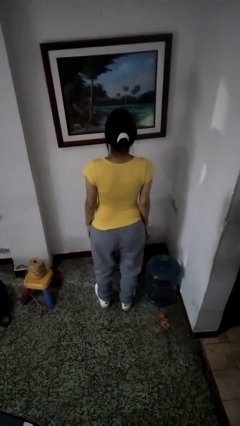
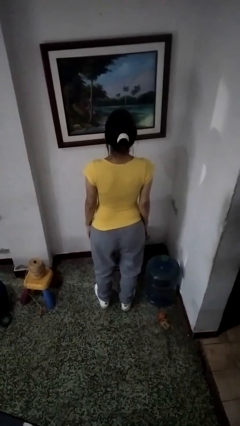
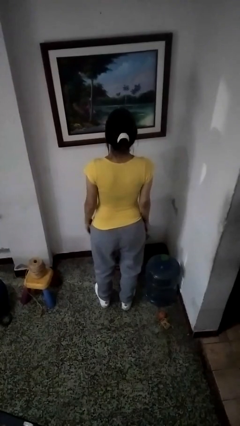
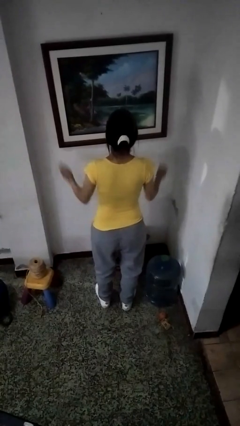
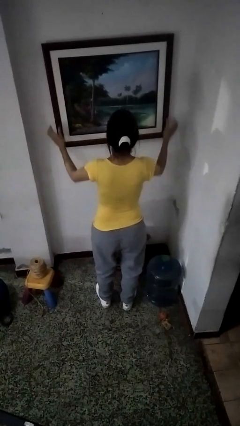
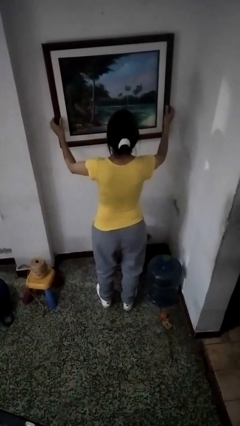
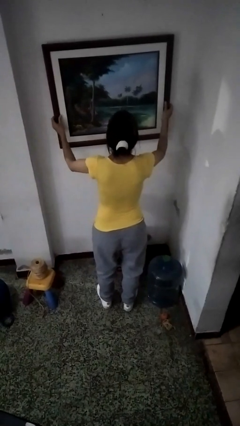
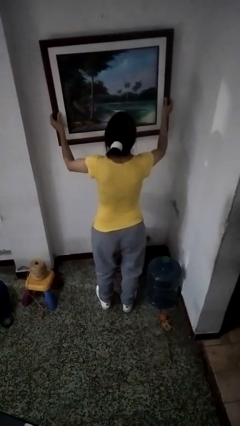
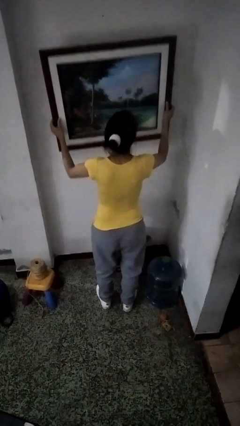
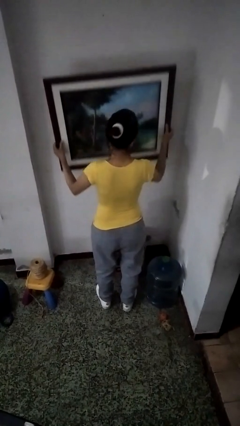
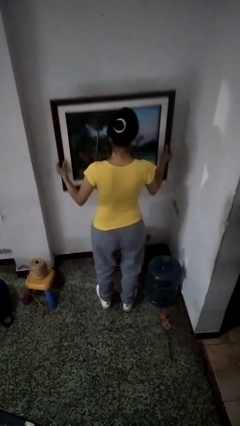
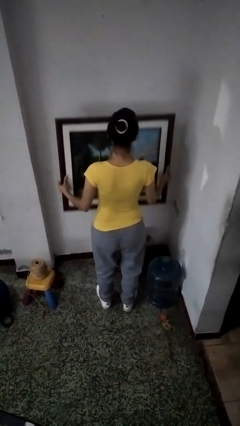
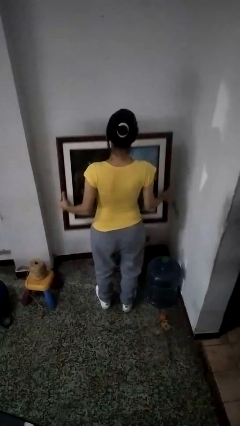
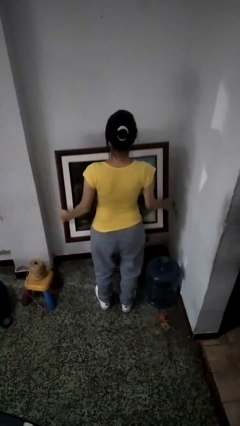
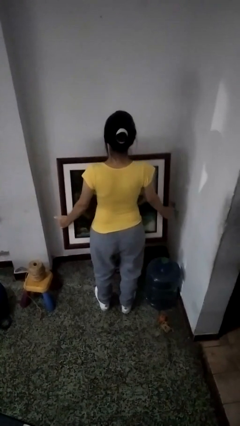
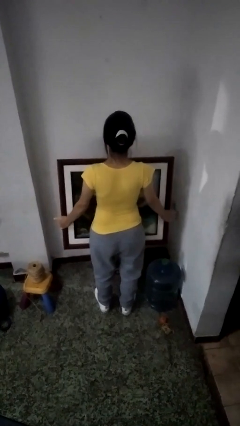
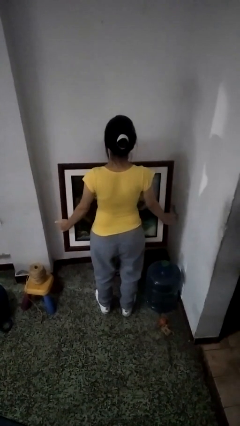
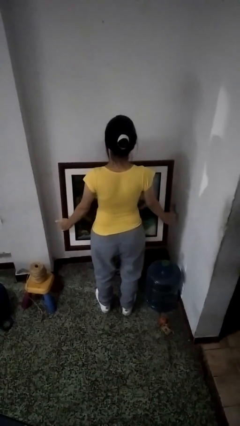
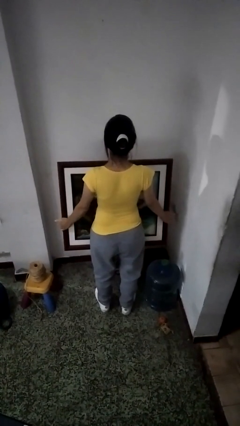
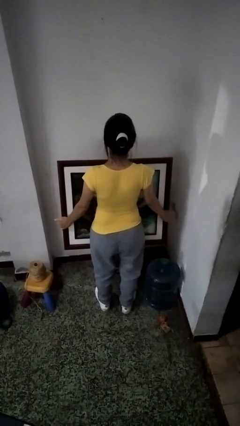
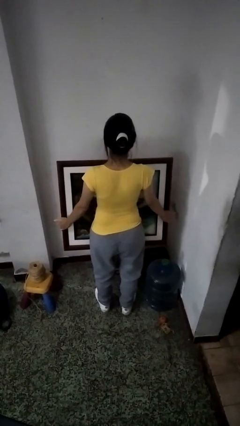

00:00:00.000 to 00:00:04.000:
person takes down picture frame

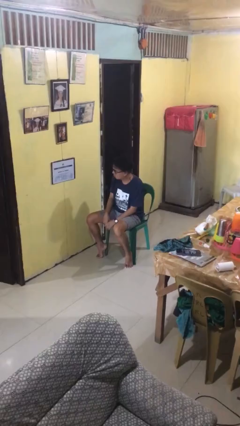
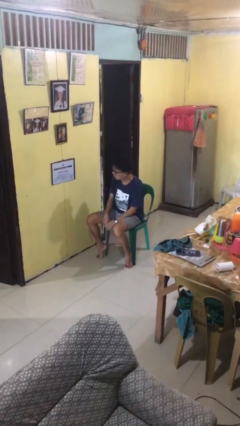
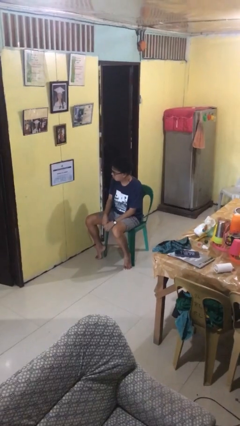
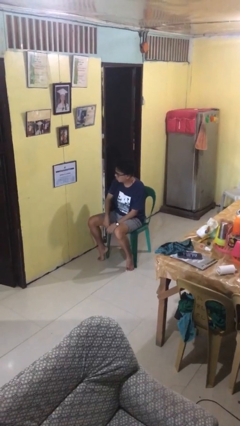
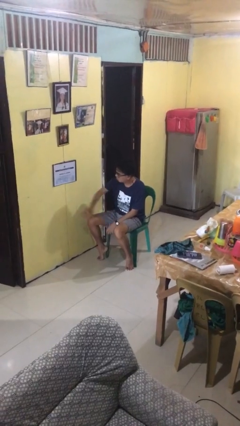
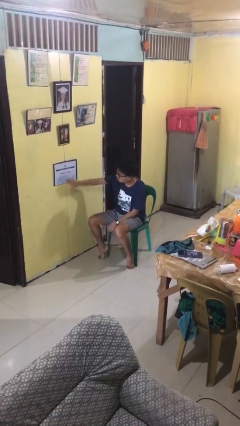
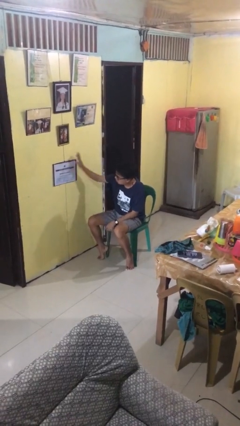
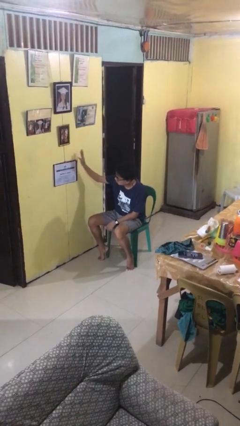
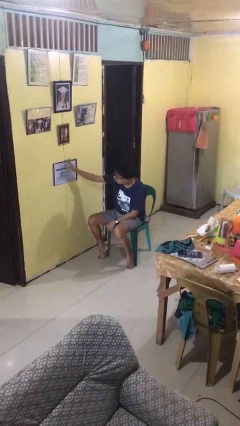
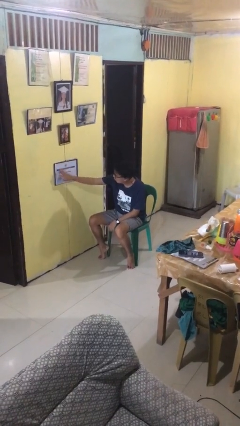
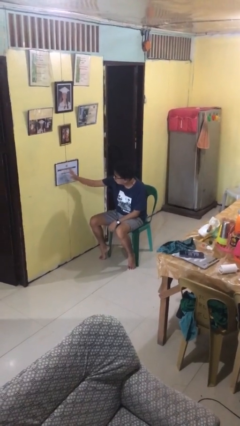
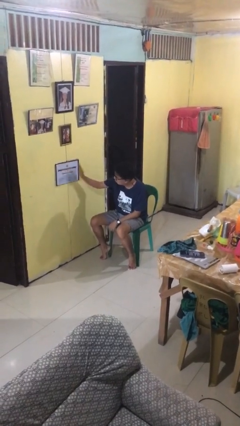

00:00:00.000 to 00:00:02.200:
person waves hand over object

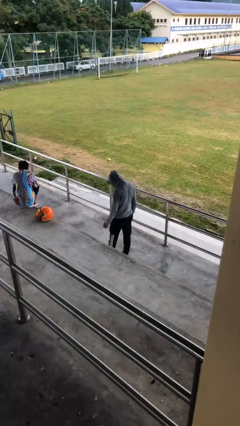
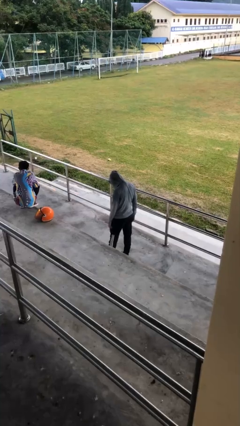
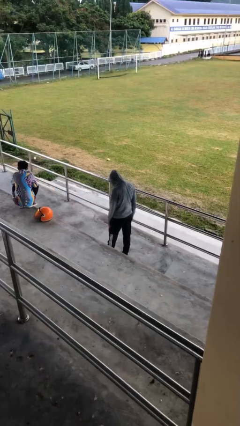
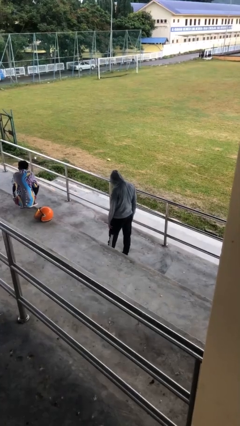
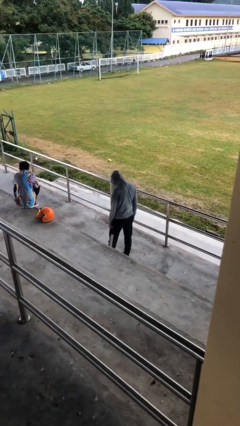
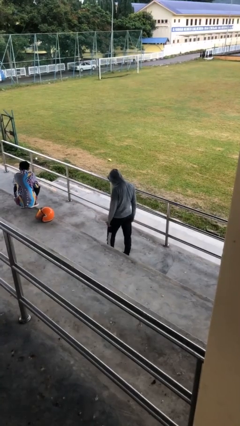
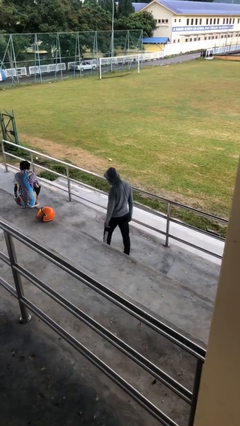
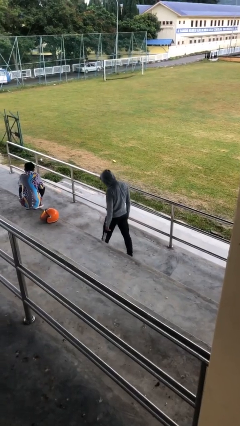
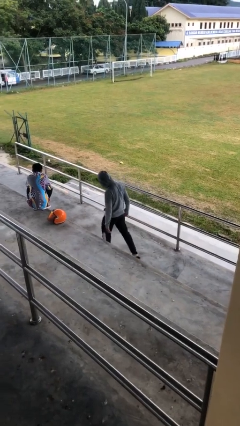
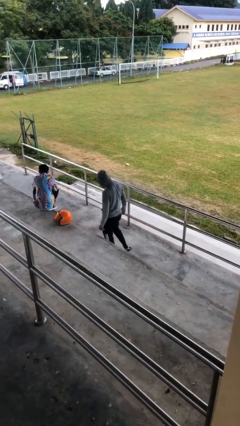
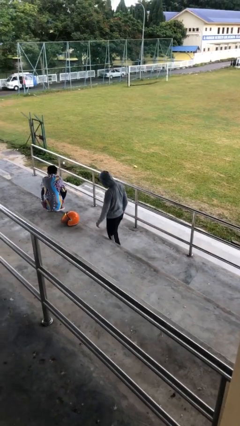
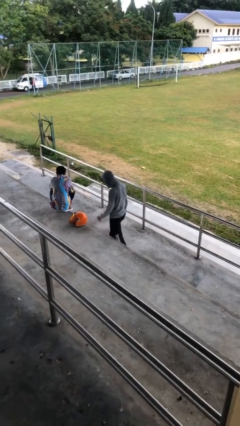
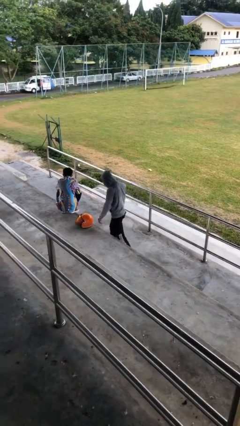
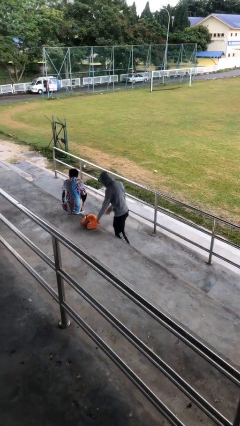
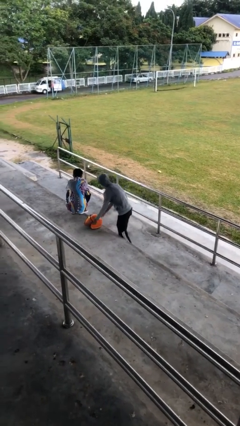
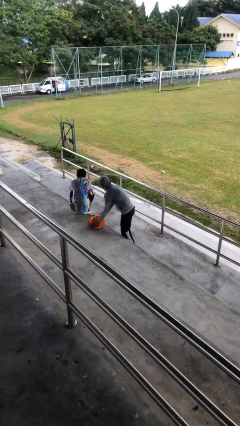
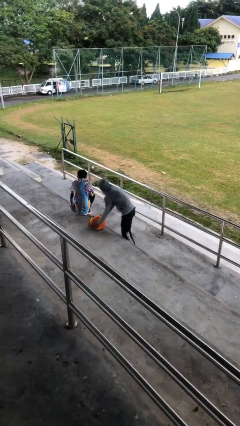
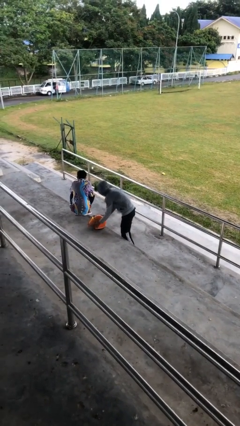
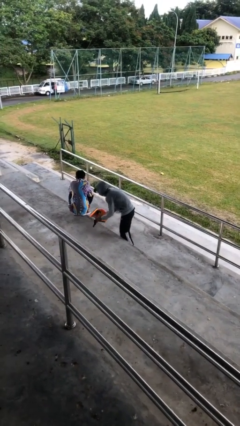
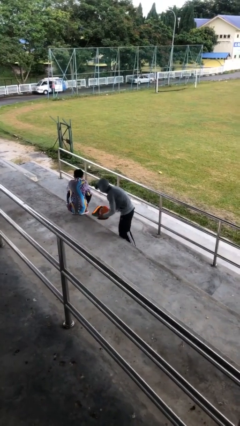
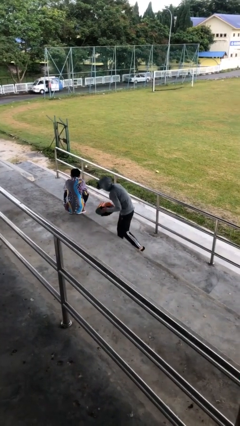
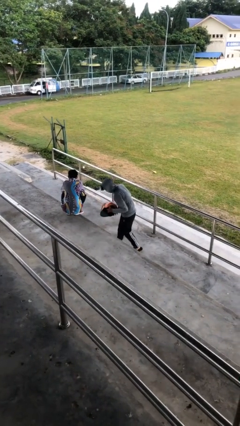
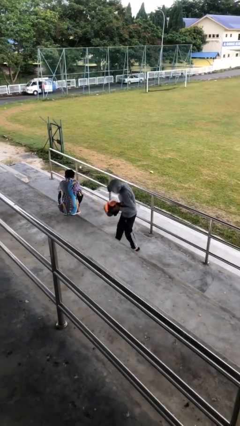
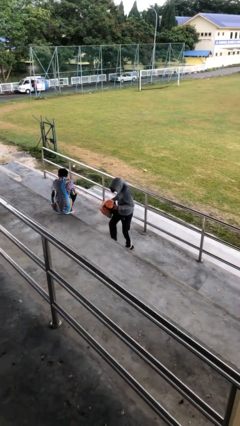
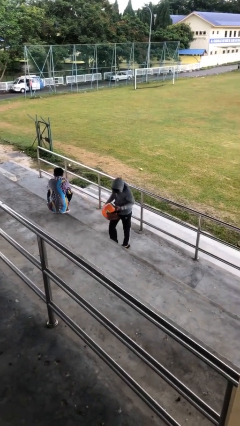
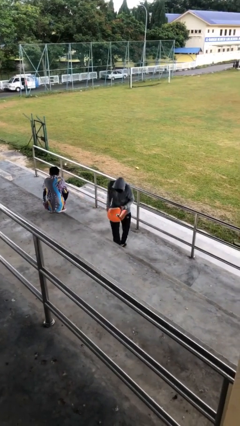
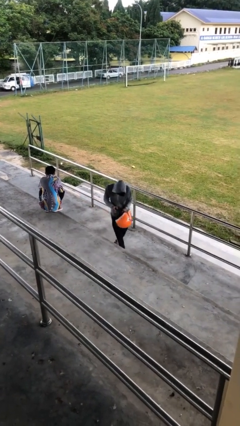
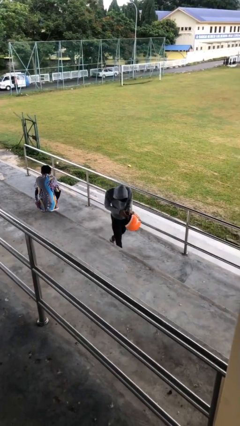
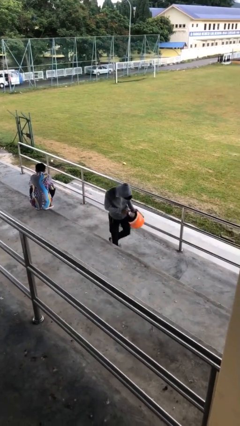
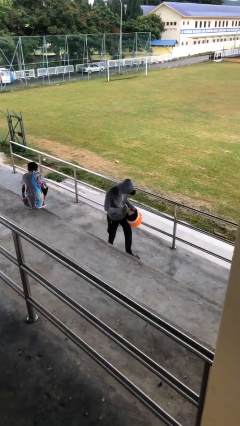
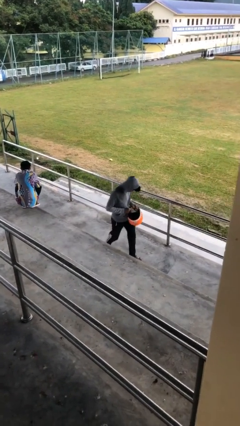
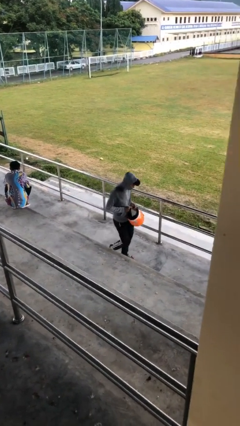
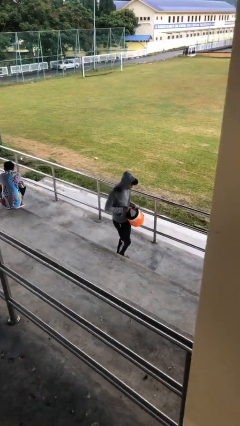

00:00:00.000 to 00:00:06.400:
person steals object from person

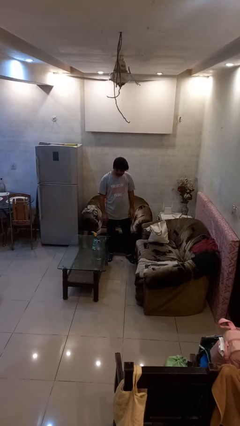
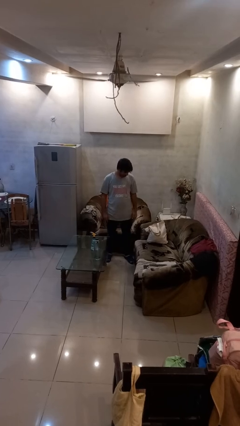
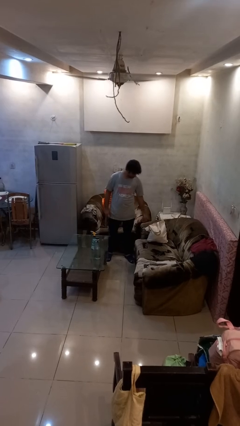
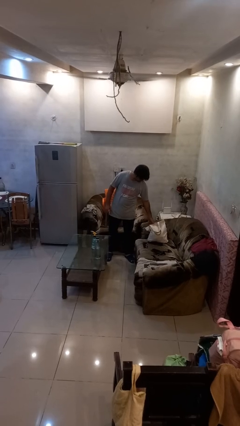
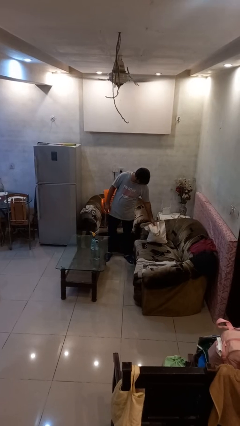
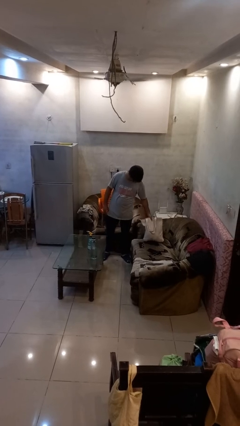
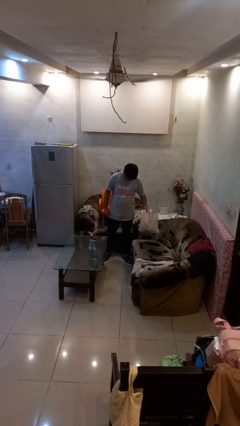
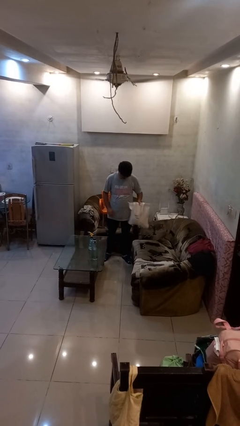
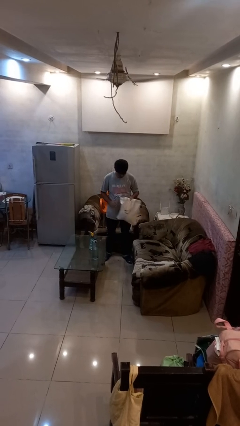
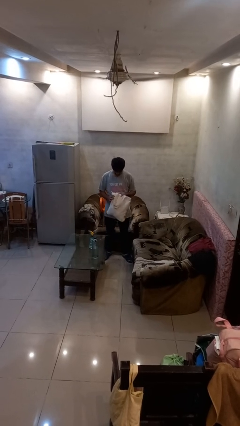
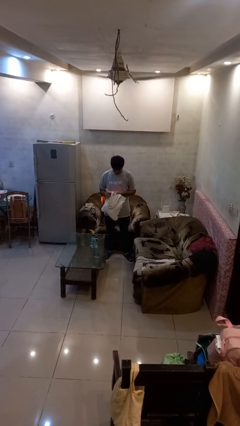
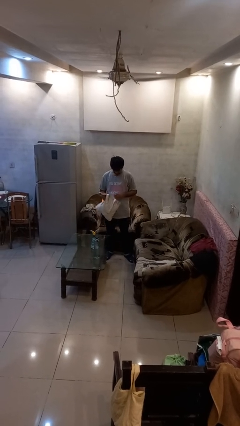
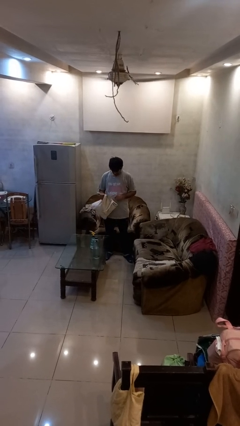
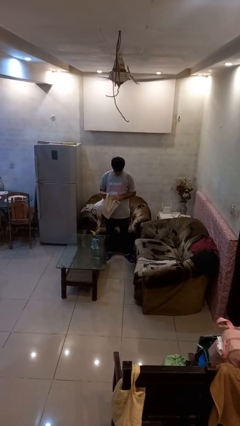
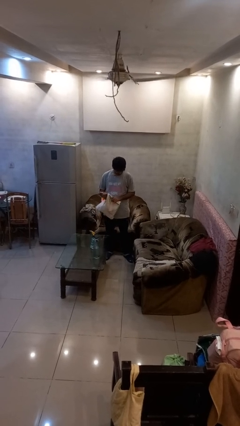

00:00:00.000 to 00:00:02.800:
person picks up object from couch

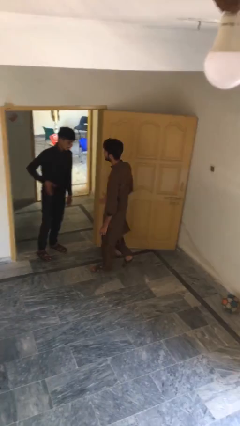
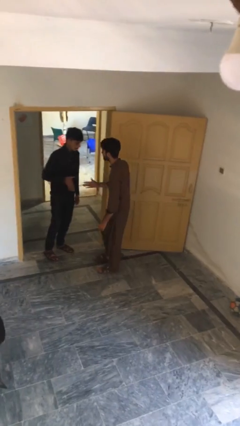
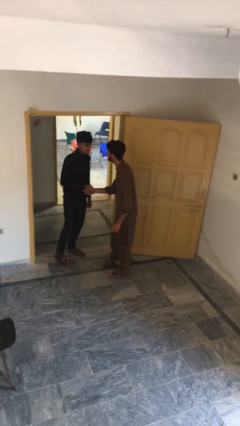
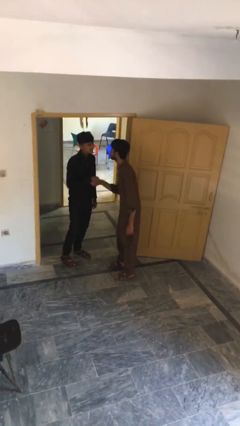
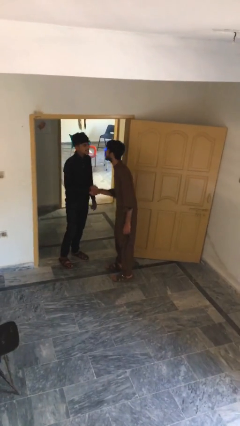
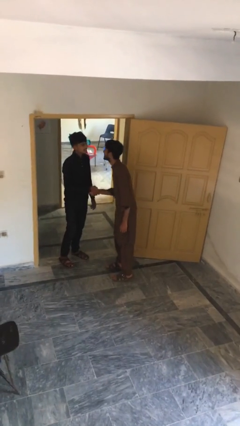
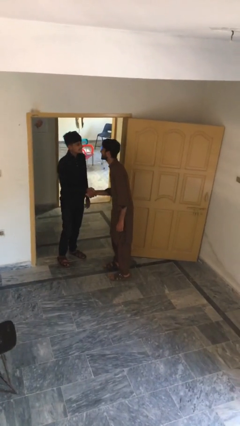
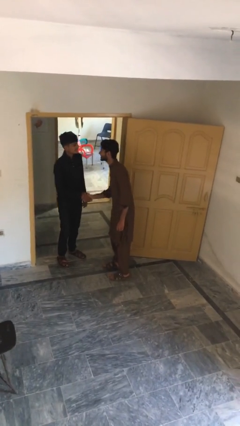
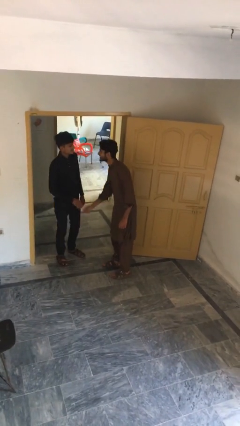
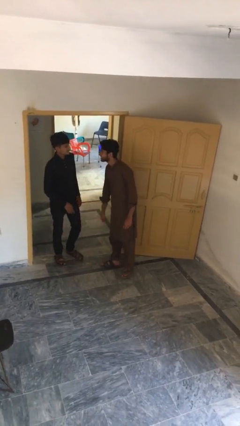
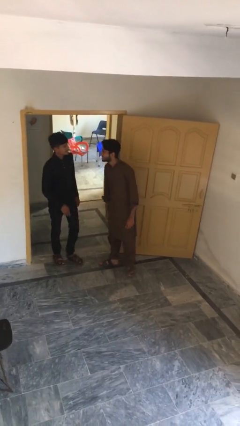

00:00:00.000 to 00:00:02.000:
person shakes hand

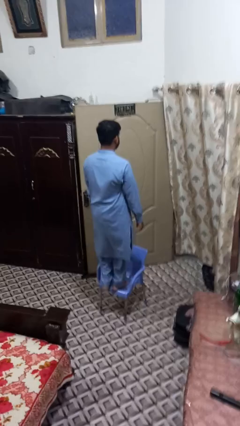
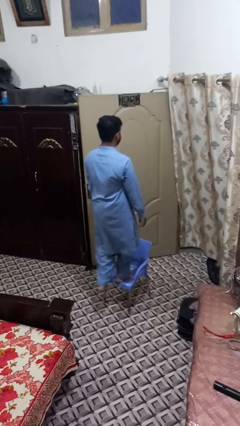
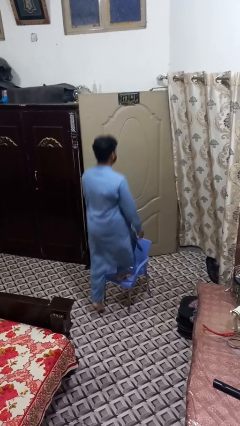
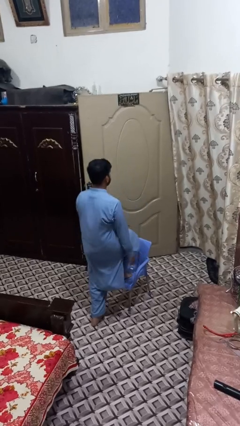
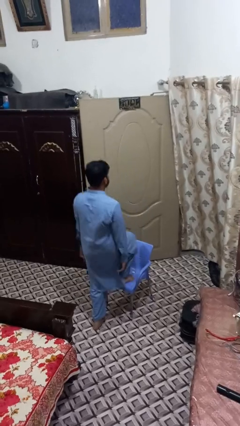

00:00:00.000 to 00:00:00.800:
person climbs on chair
